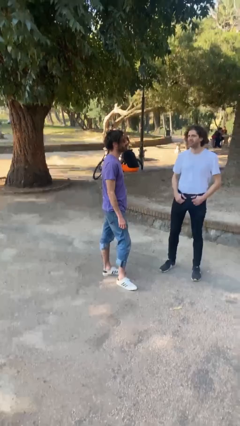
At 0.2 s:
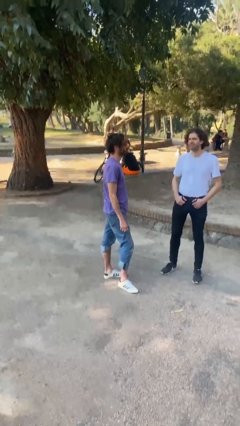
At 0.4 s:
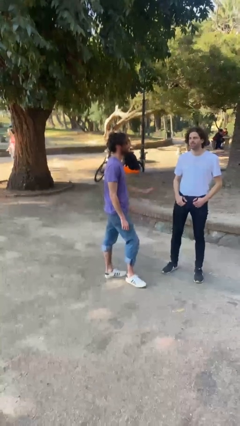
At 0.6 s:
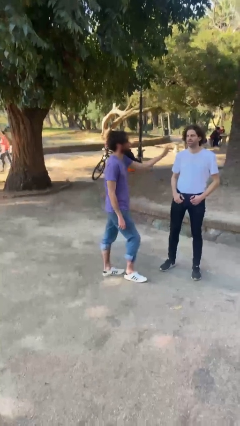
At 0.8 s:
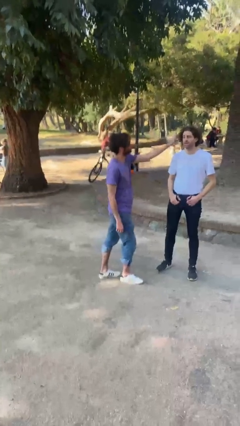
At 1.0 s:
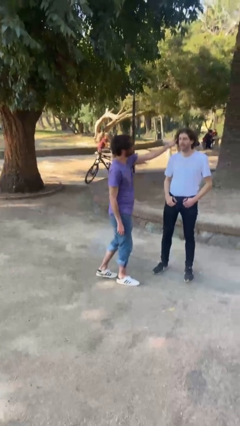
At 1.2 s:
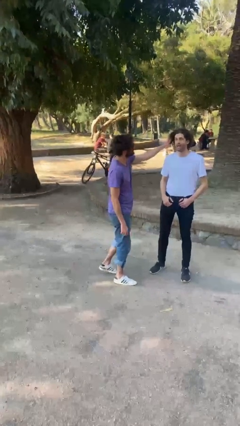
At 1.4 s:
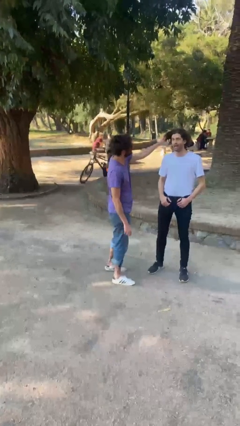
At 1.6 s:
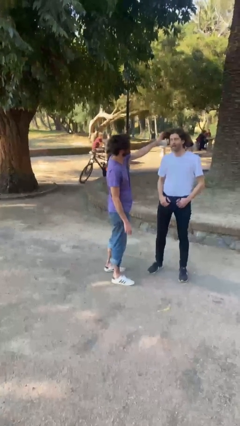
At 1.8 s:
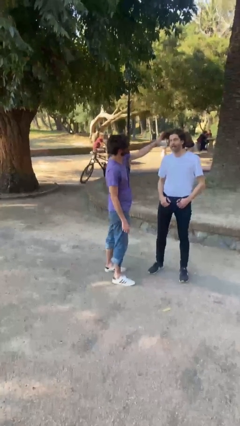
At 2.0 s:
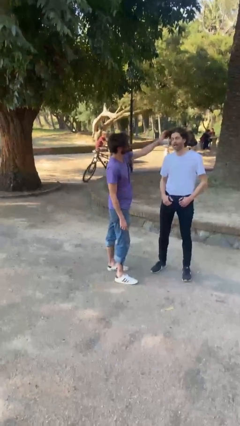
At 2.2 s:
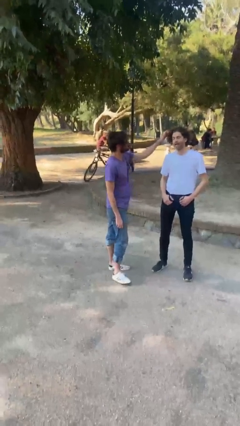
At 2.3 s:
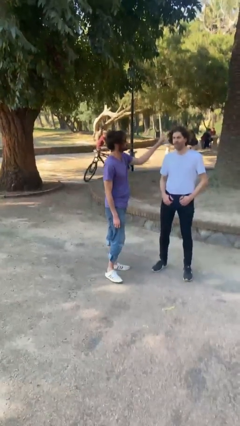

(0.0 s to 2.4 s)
person grabs person by hair

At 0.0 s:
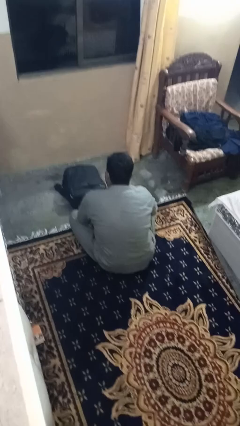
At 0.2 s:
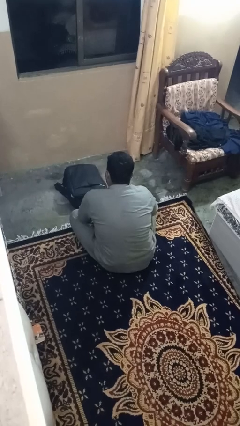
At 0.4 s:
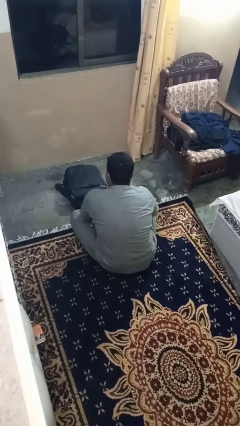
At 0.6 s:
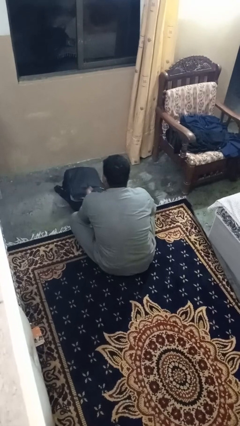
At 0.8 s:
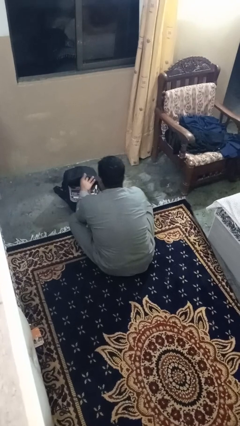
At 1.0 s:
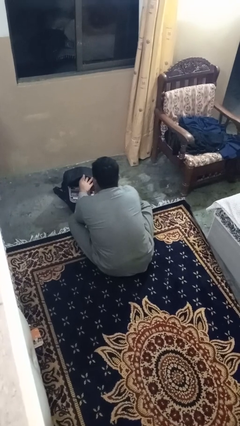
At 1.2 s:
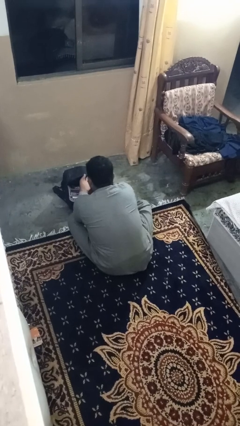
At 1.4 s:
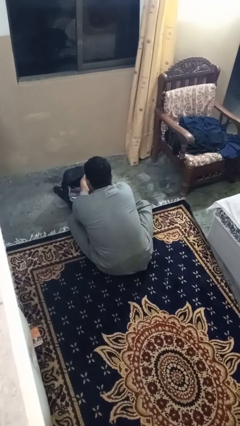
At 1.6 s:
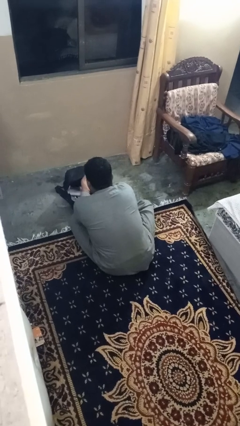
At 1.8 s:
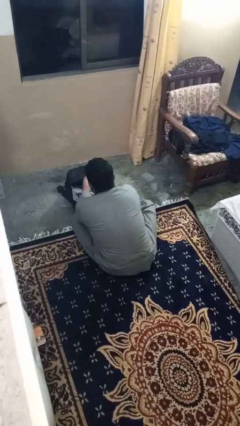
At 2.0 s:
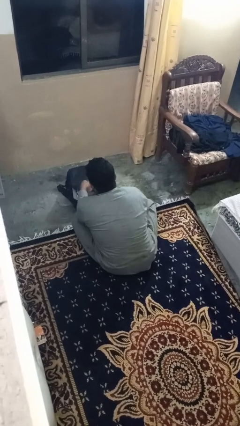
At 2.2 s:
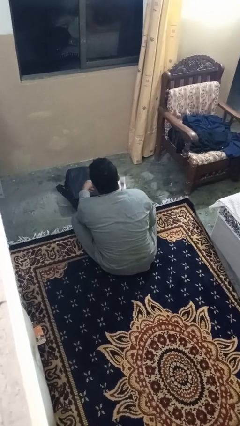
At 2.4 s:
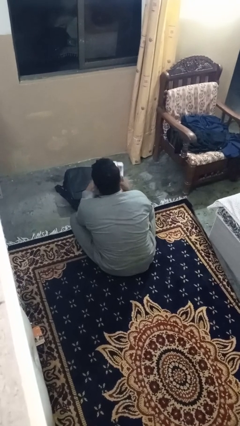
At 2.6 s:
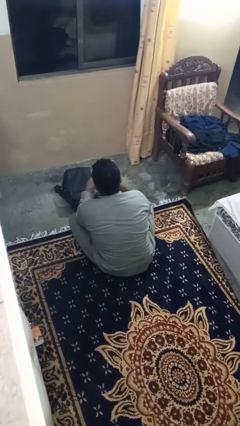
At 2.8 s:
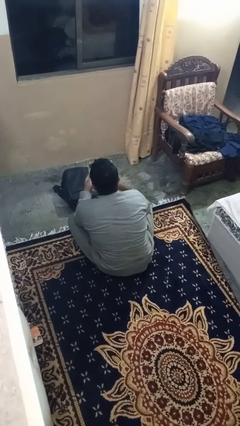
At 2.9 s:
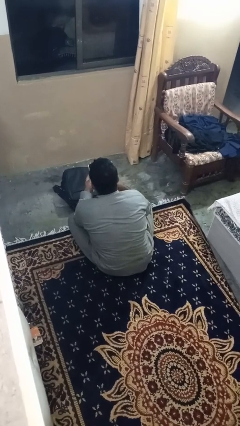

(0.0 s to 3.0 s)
person takes object from bag

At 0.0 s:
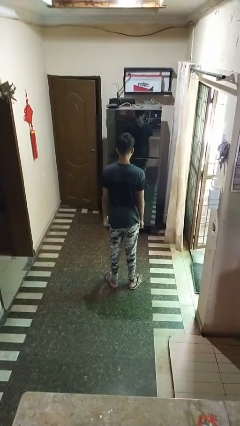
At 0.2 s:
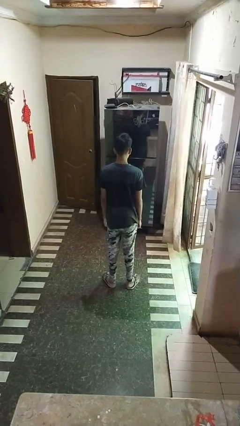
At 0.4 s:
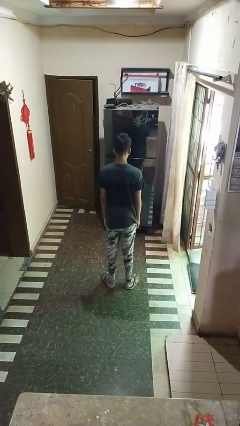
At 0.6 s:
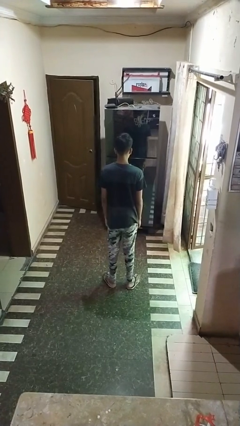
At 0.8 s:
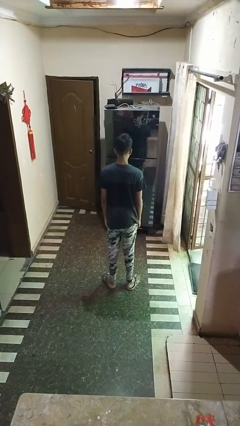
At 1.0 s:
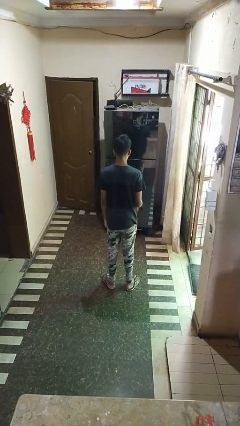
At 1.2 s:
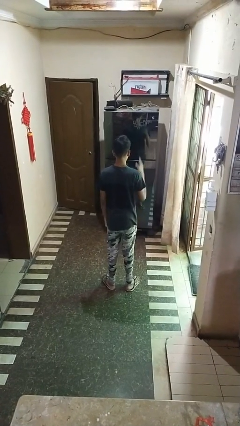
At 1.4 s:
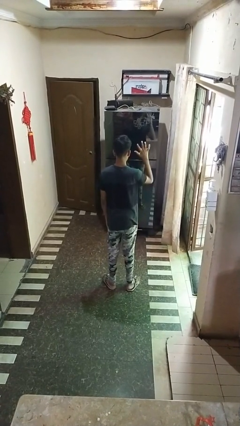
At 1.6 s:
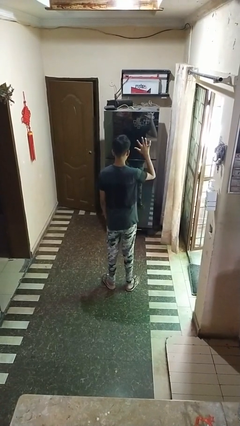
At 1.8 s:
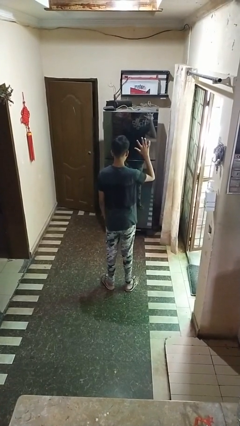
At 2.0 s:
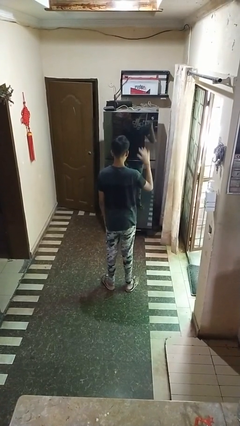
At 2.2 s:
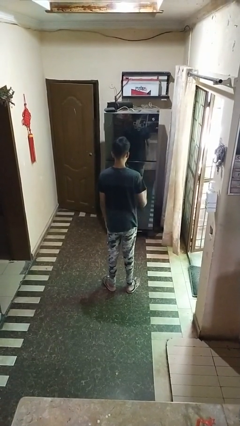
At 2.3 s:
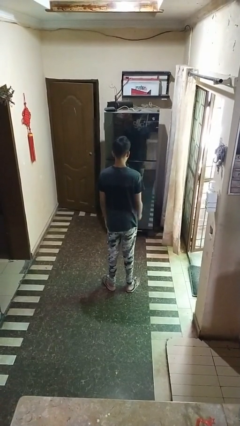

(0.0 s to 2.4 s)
person gestures number five

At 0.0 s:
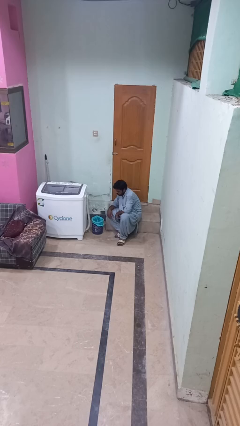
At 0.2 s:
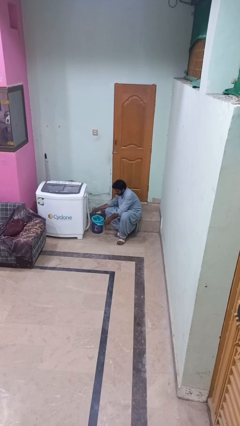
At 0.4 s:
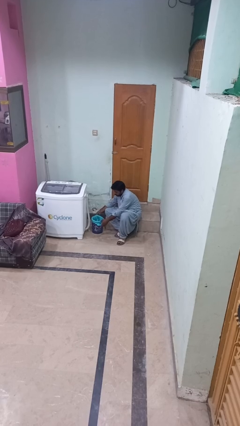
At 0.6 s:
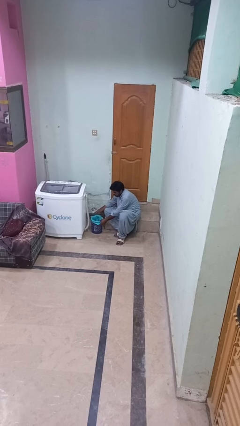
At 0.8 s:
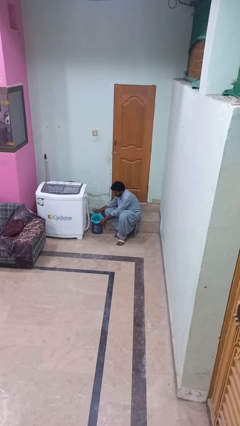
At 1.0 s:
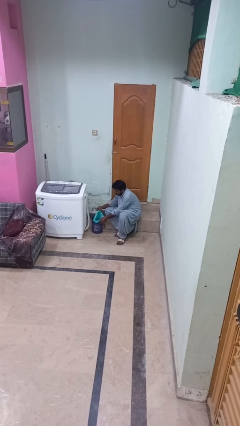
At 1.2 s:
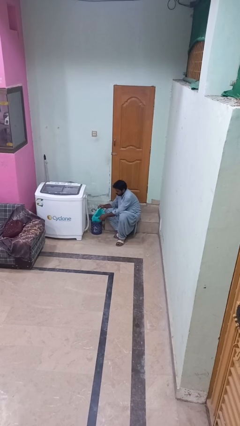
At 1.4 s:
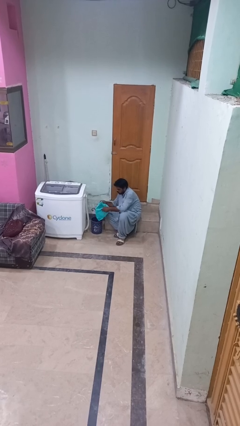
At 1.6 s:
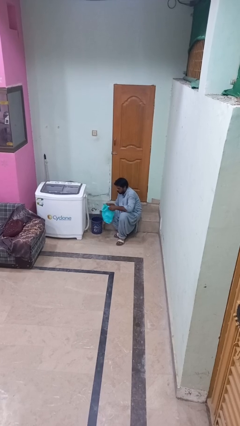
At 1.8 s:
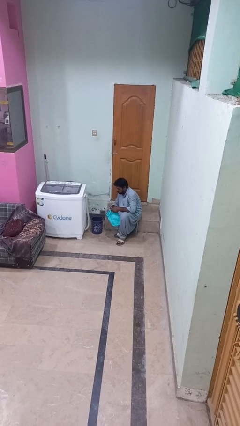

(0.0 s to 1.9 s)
person removes trashbag from trashcan

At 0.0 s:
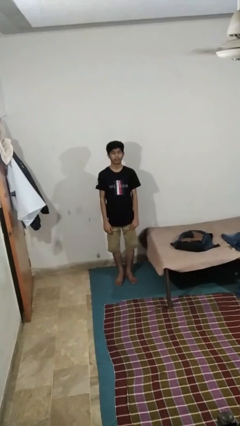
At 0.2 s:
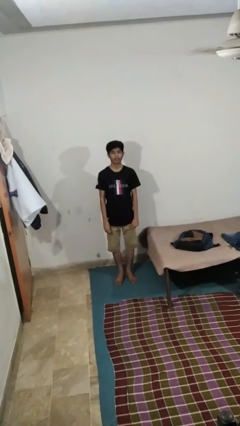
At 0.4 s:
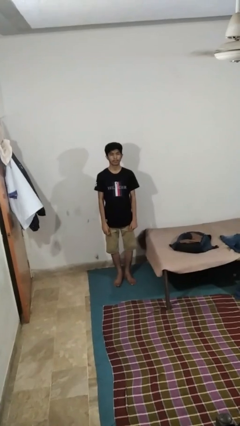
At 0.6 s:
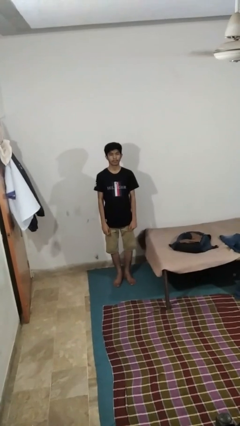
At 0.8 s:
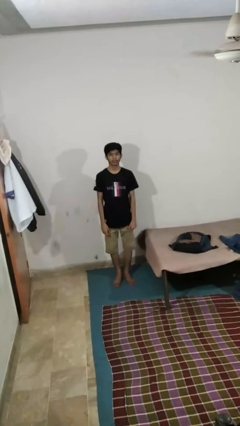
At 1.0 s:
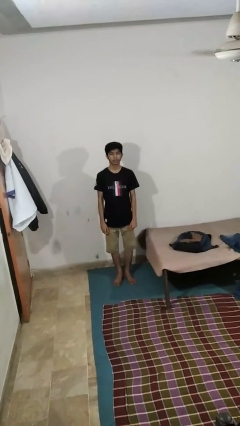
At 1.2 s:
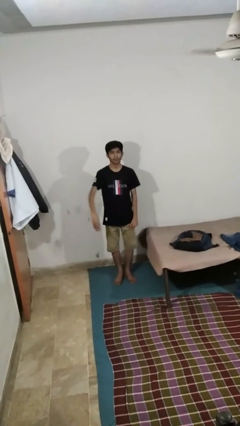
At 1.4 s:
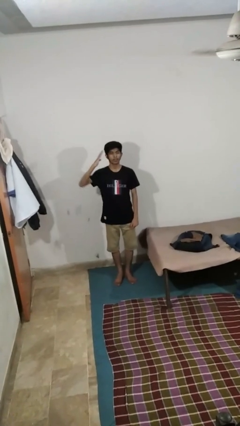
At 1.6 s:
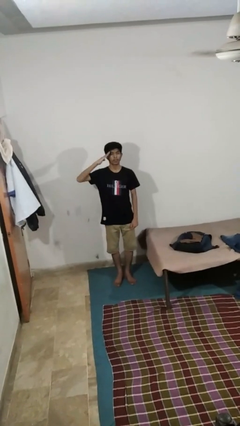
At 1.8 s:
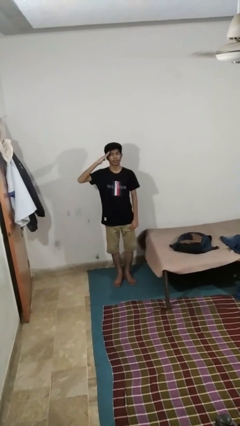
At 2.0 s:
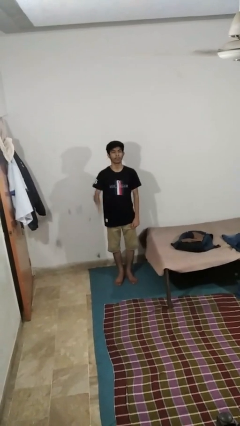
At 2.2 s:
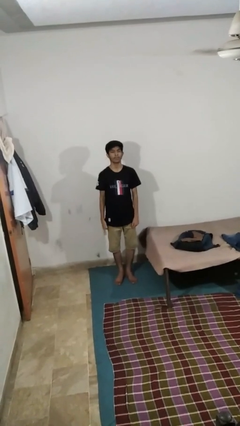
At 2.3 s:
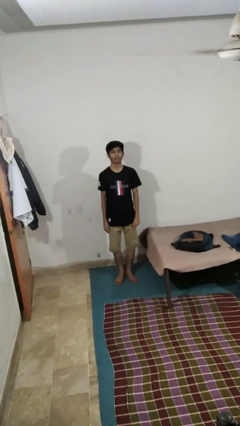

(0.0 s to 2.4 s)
person salutes

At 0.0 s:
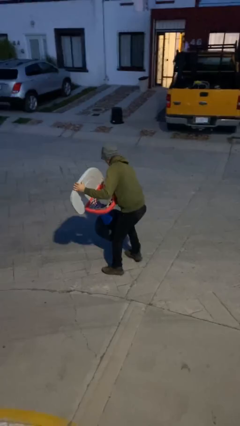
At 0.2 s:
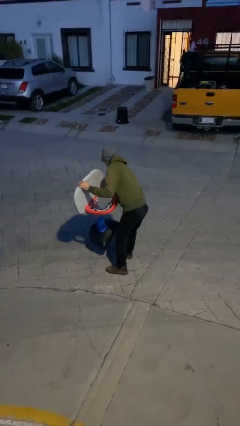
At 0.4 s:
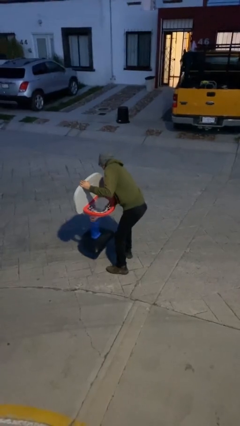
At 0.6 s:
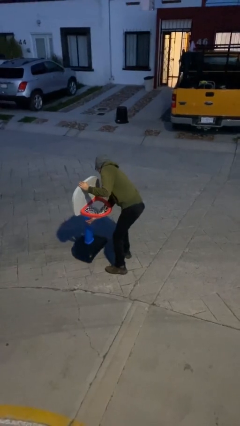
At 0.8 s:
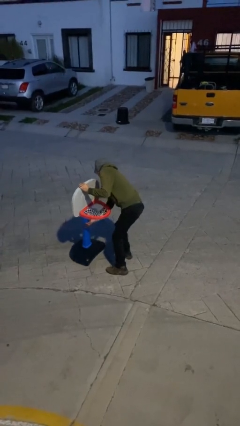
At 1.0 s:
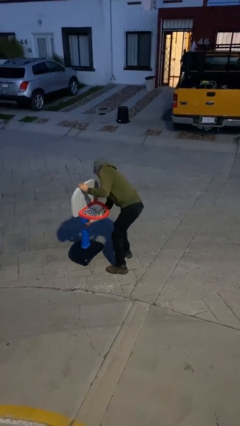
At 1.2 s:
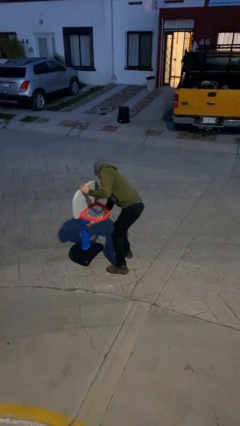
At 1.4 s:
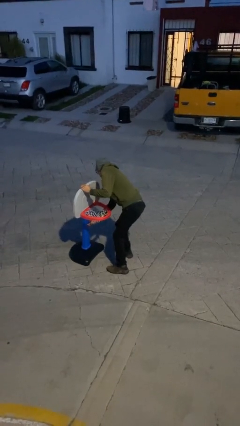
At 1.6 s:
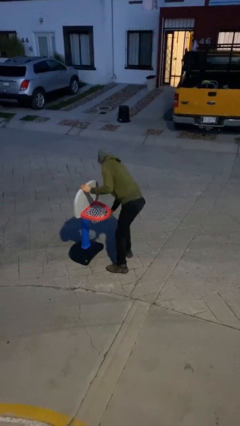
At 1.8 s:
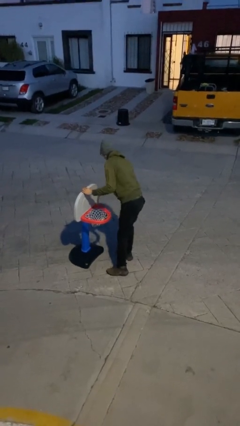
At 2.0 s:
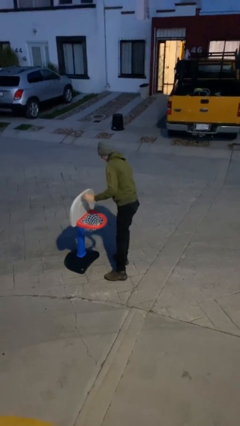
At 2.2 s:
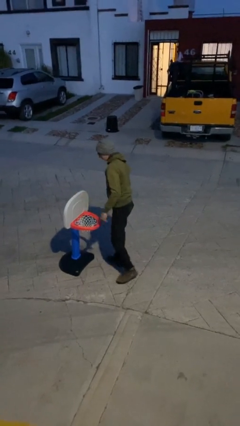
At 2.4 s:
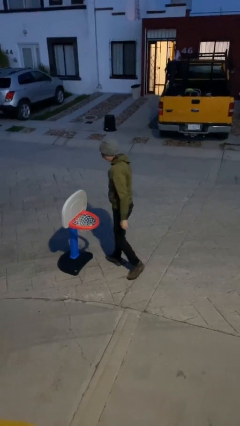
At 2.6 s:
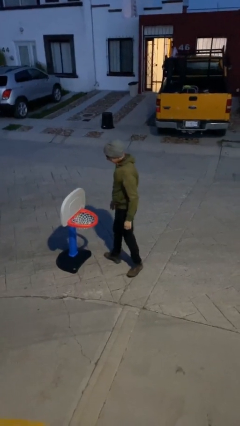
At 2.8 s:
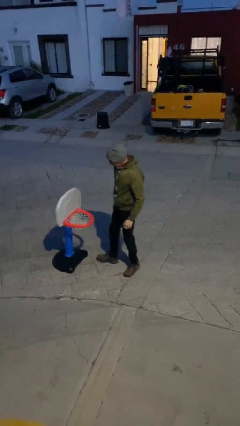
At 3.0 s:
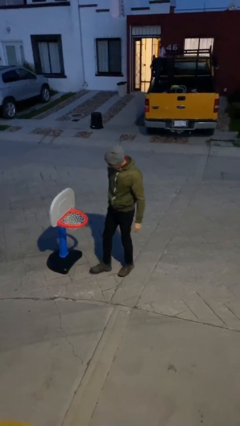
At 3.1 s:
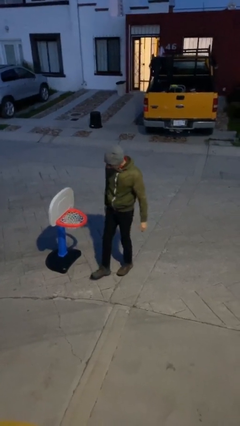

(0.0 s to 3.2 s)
person puts down object on floor

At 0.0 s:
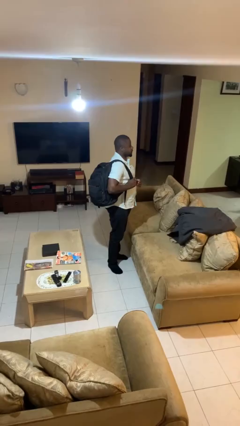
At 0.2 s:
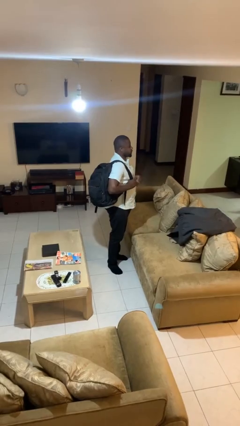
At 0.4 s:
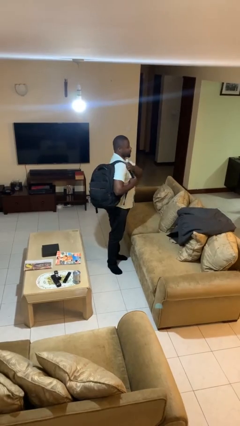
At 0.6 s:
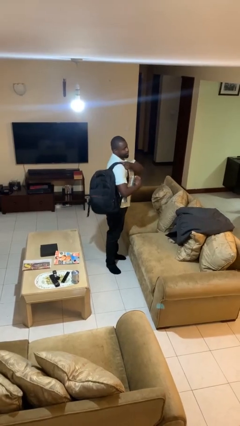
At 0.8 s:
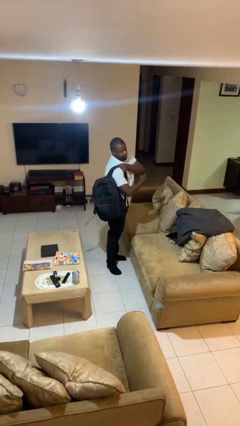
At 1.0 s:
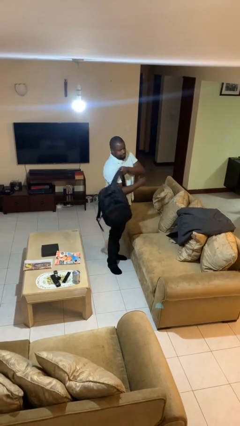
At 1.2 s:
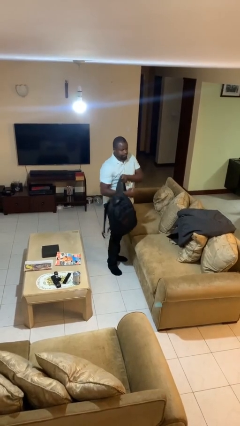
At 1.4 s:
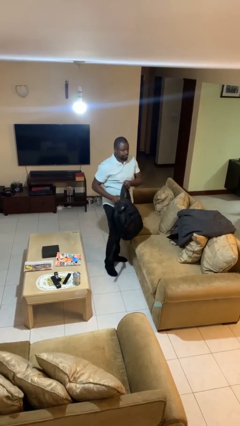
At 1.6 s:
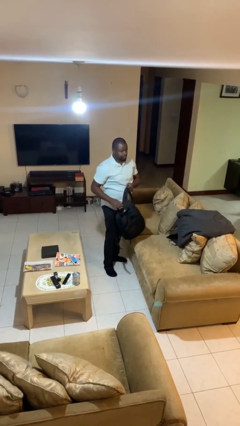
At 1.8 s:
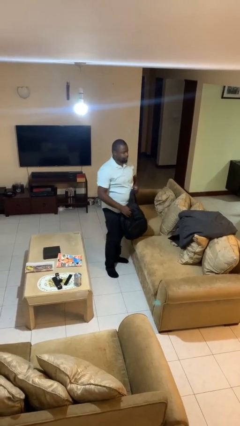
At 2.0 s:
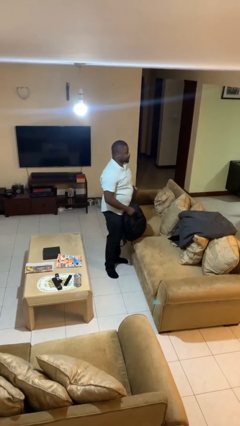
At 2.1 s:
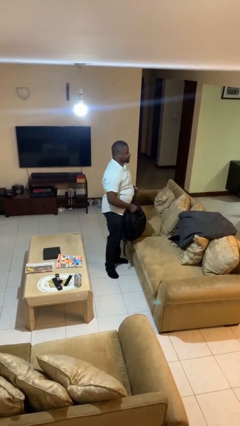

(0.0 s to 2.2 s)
person takes off backpack
